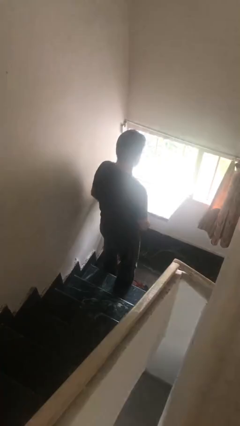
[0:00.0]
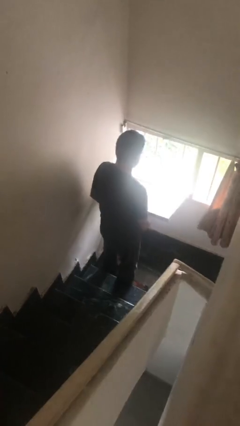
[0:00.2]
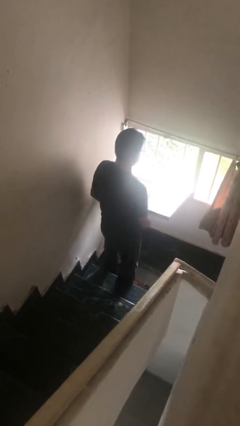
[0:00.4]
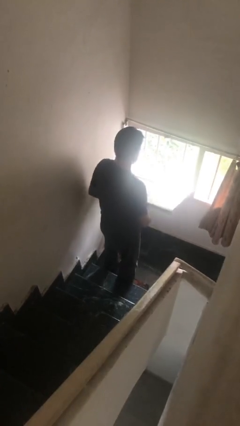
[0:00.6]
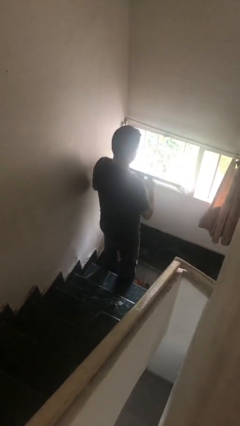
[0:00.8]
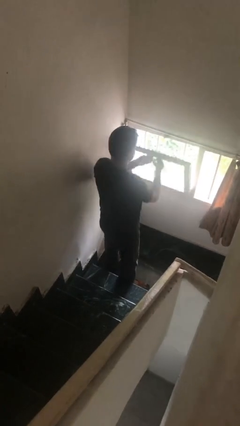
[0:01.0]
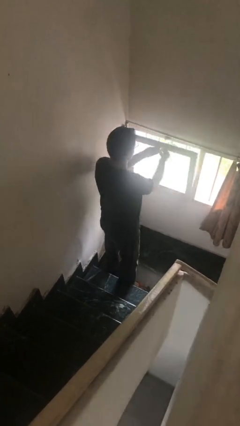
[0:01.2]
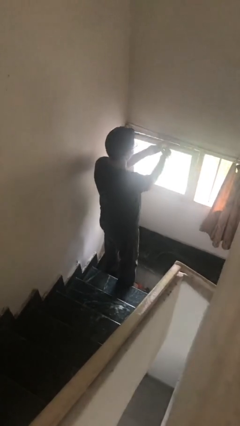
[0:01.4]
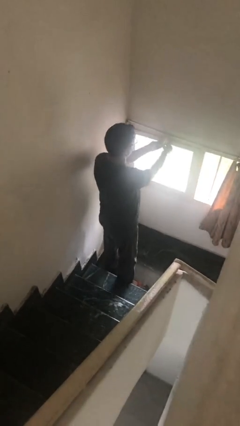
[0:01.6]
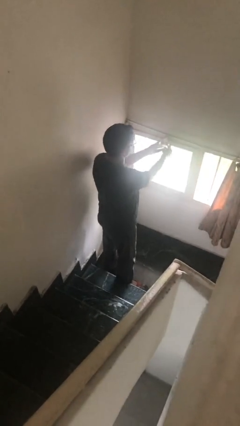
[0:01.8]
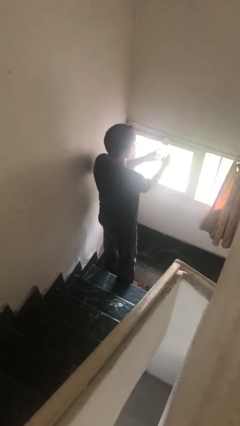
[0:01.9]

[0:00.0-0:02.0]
person closes home window

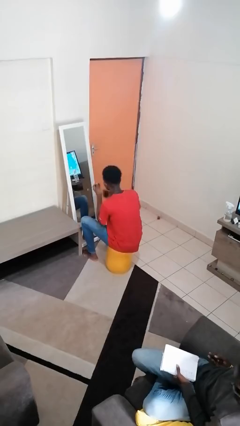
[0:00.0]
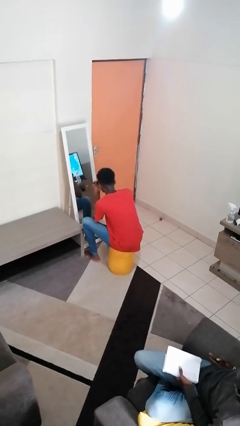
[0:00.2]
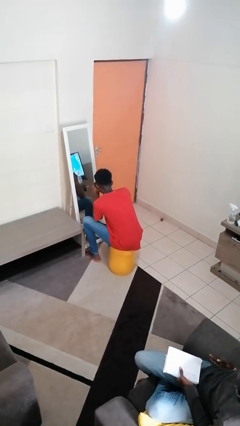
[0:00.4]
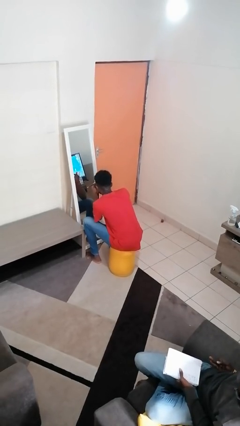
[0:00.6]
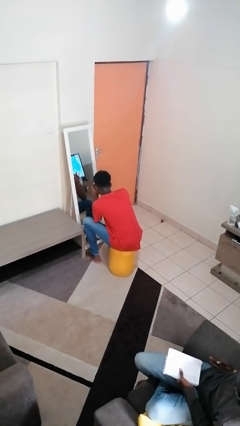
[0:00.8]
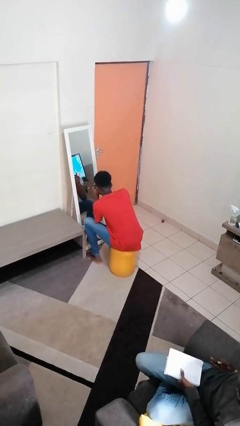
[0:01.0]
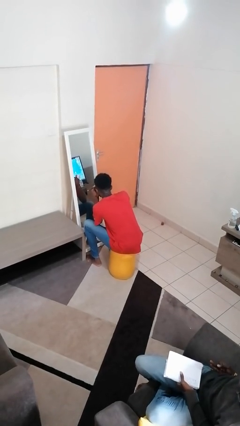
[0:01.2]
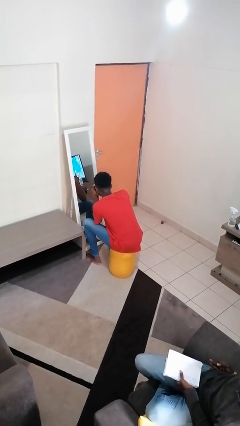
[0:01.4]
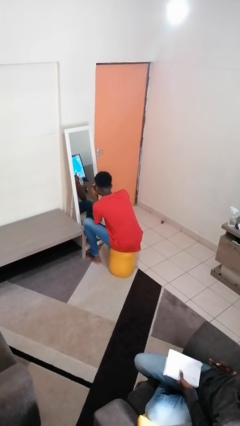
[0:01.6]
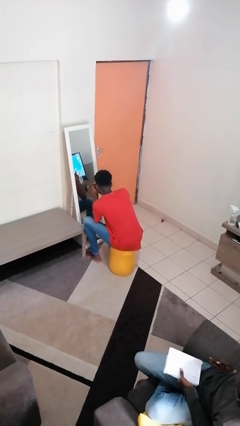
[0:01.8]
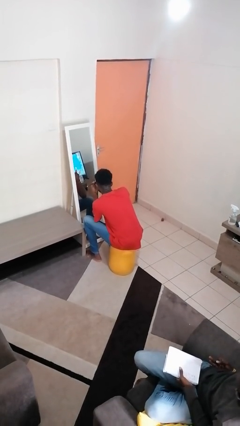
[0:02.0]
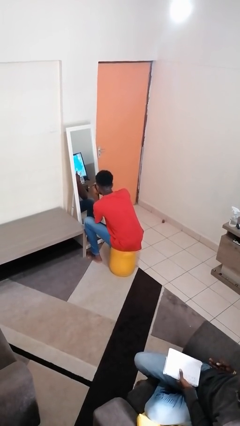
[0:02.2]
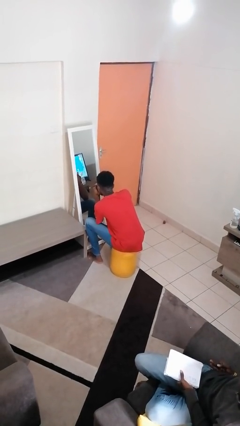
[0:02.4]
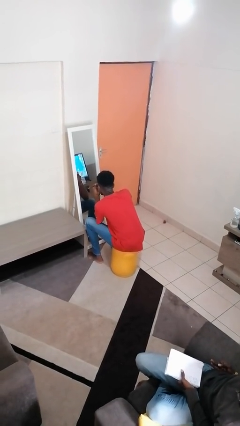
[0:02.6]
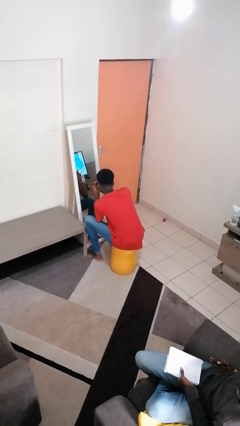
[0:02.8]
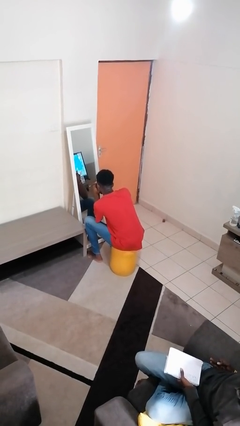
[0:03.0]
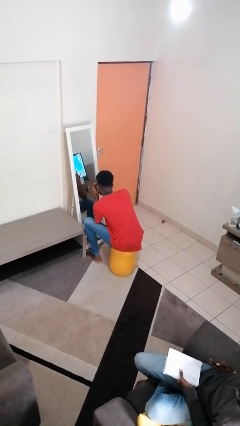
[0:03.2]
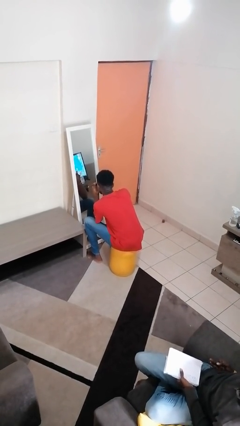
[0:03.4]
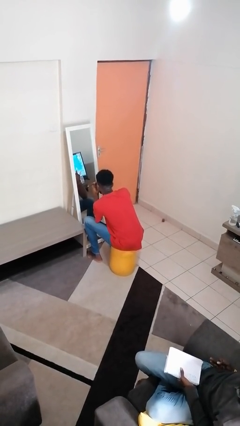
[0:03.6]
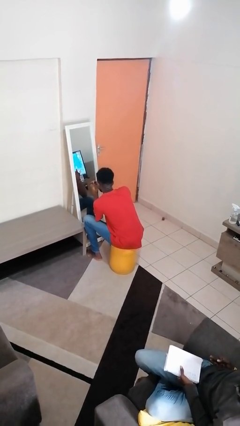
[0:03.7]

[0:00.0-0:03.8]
person applies eye makeup

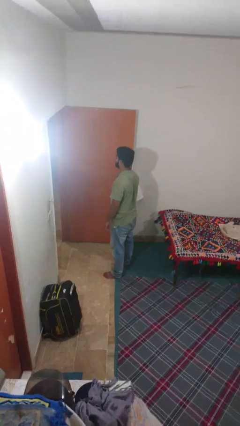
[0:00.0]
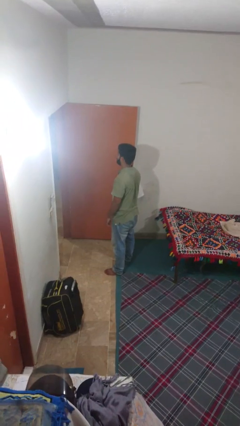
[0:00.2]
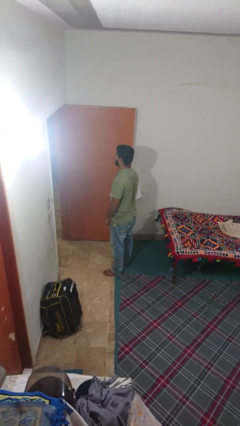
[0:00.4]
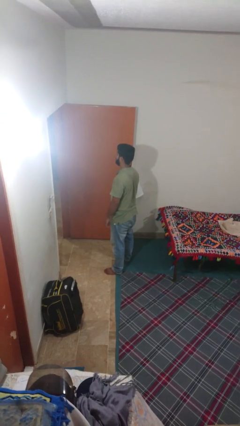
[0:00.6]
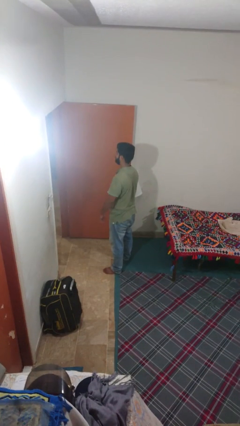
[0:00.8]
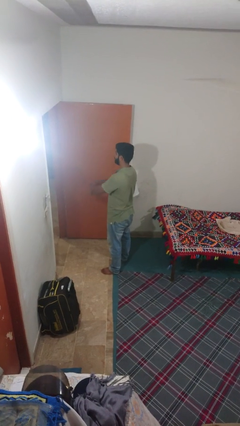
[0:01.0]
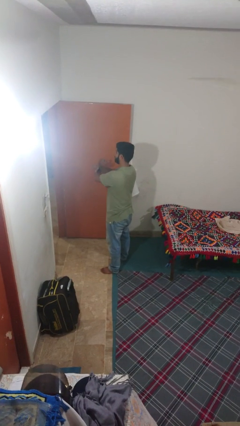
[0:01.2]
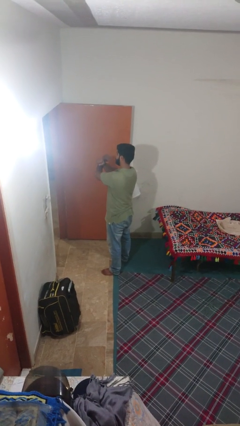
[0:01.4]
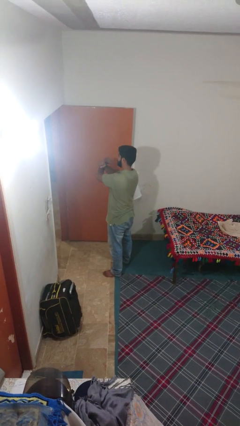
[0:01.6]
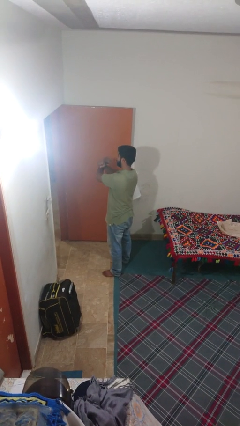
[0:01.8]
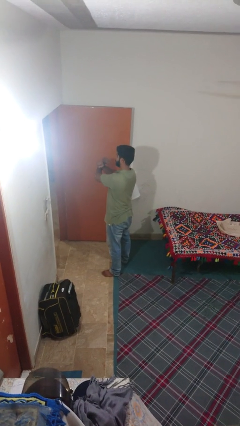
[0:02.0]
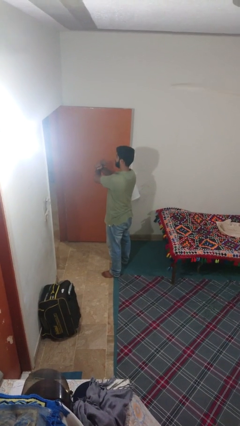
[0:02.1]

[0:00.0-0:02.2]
person crosses arms

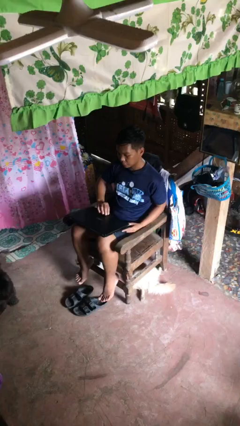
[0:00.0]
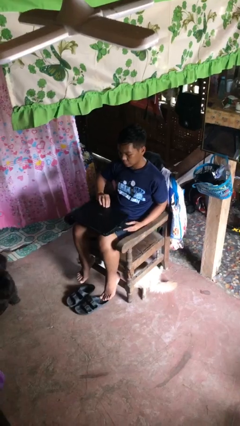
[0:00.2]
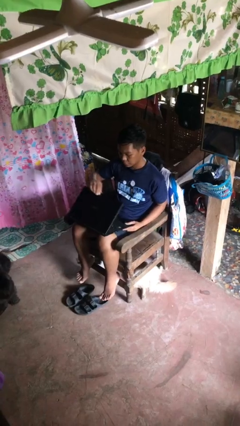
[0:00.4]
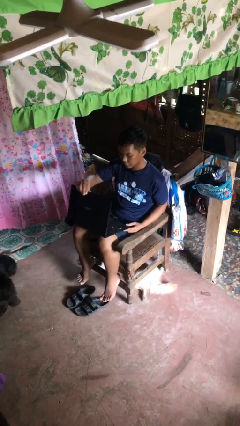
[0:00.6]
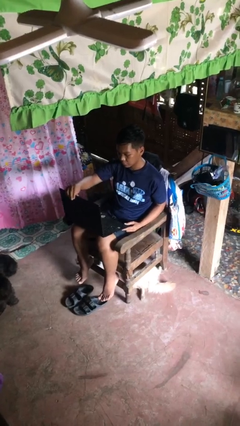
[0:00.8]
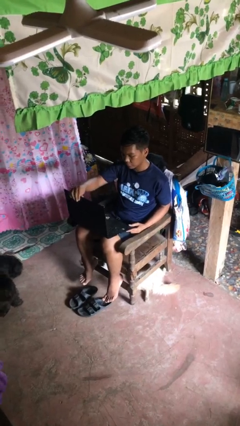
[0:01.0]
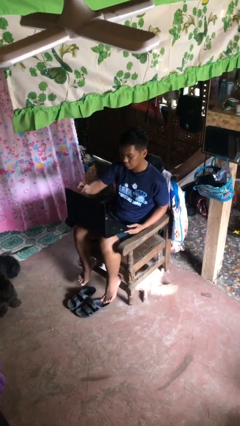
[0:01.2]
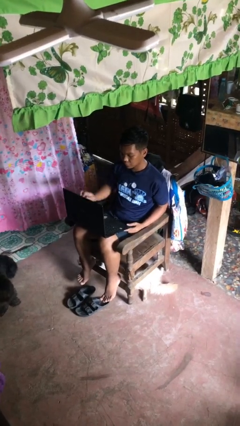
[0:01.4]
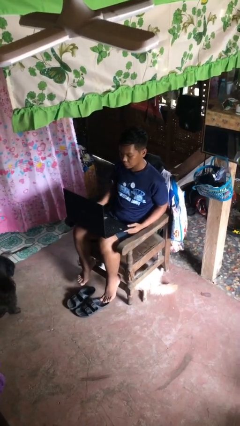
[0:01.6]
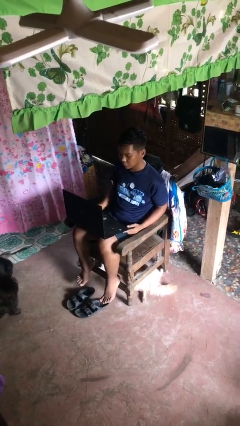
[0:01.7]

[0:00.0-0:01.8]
person opens laptop

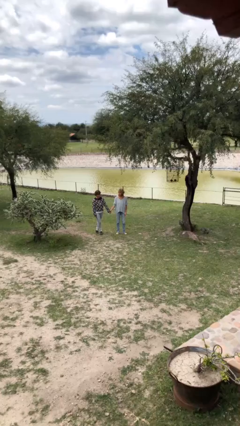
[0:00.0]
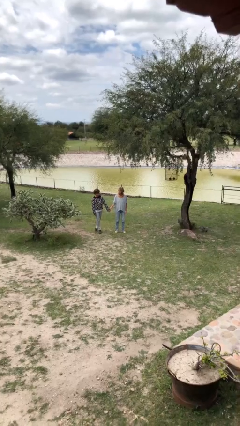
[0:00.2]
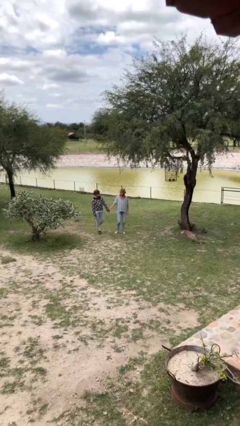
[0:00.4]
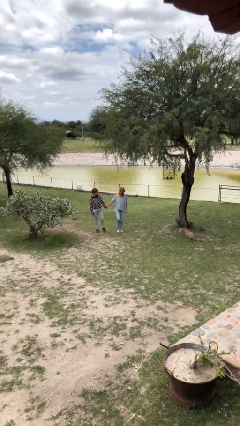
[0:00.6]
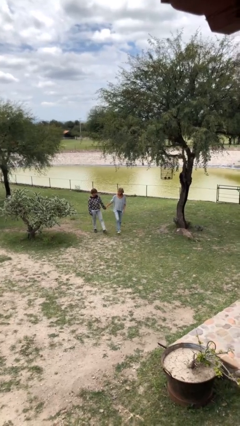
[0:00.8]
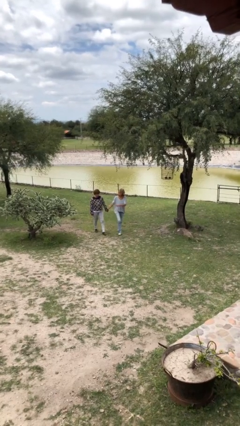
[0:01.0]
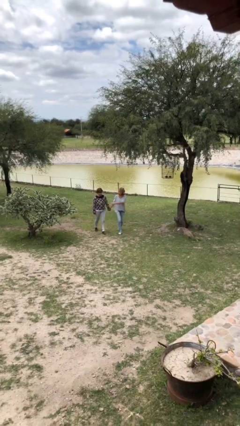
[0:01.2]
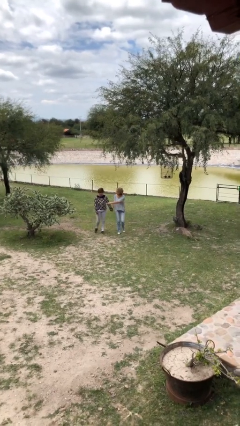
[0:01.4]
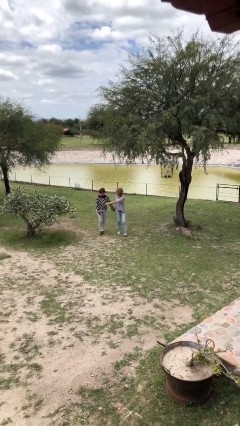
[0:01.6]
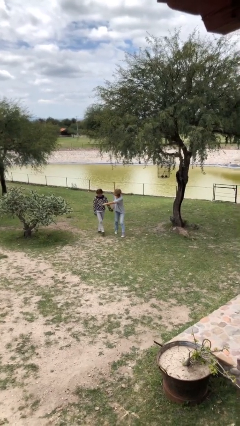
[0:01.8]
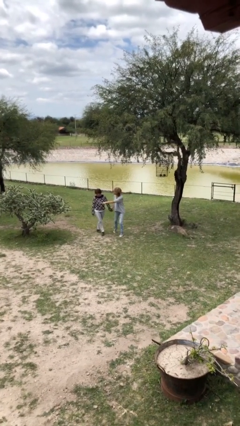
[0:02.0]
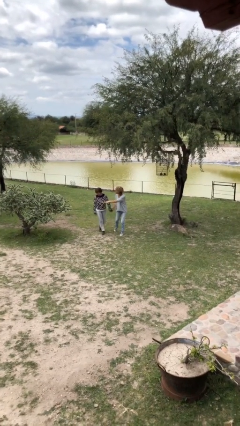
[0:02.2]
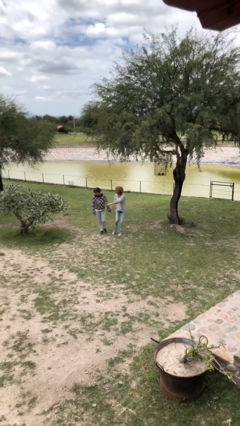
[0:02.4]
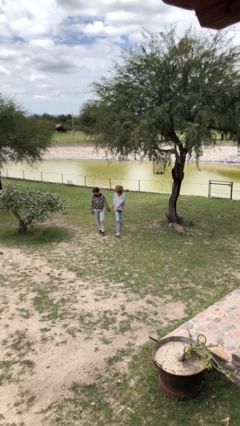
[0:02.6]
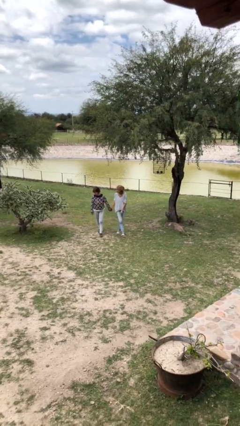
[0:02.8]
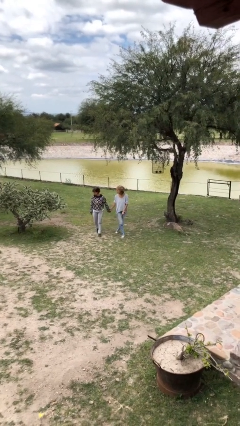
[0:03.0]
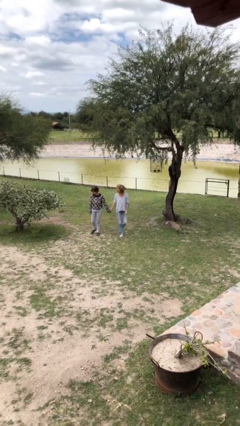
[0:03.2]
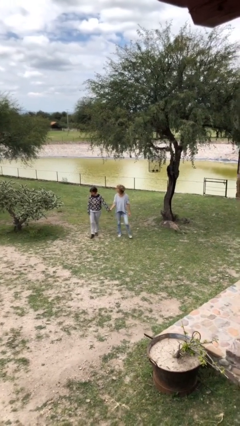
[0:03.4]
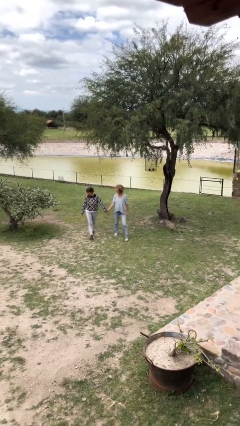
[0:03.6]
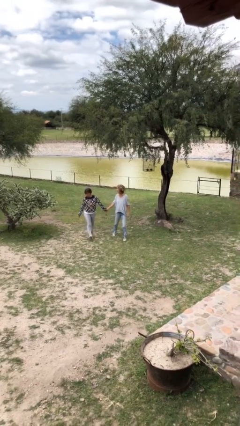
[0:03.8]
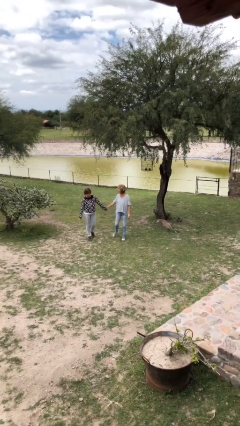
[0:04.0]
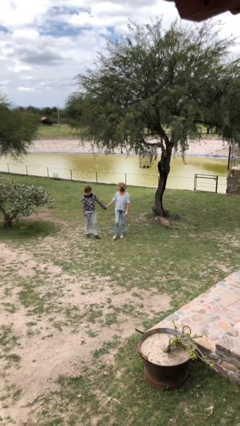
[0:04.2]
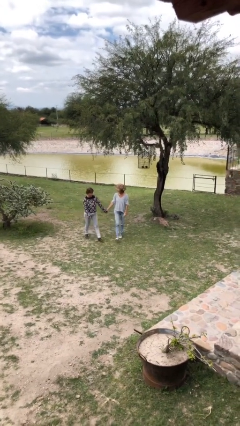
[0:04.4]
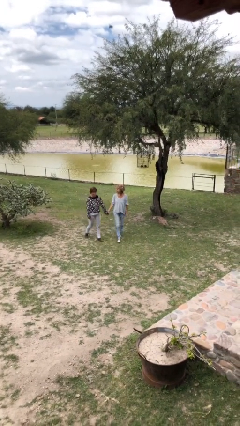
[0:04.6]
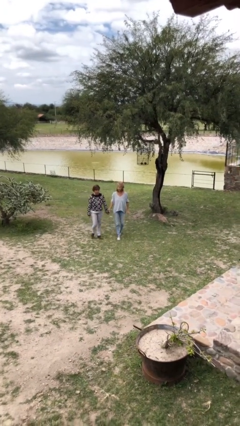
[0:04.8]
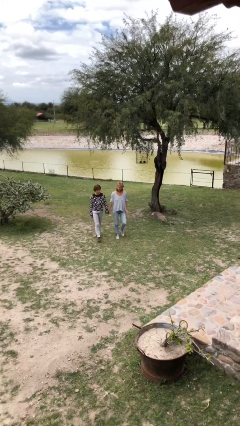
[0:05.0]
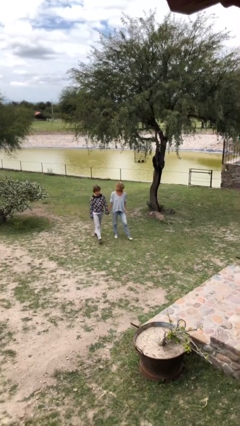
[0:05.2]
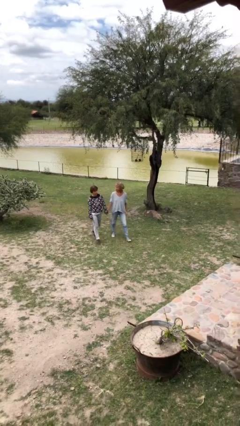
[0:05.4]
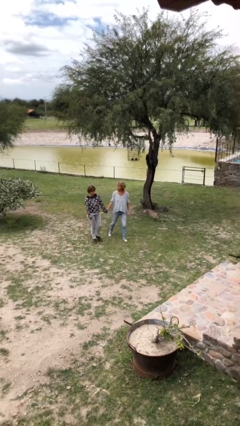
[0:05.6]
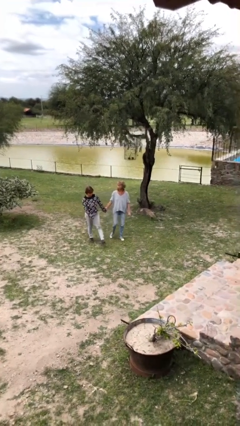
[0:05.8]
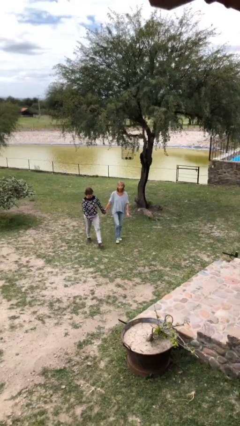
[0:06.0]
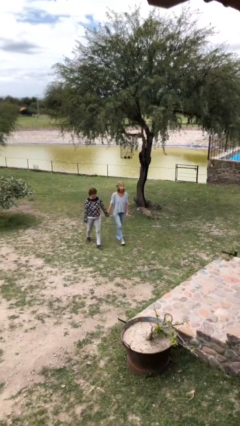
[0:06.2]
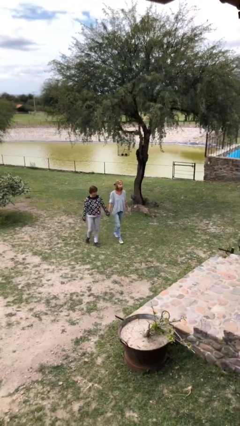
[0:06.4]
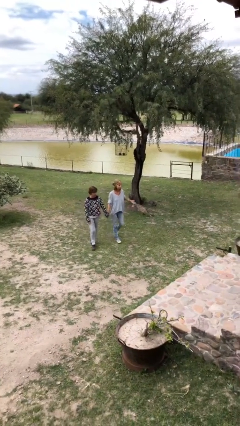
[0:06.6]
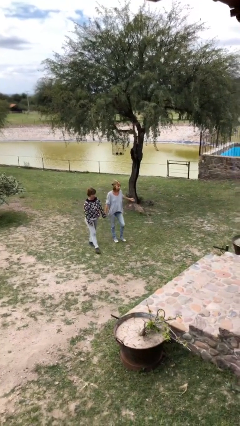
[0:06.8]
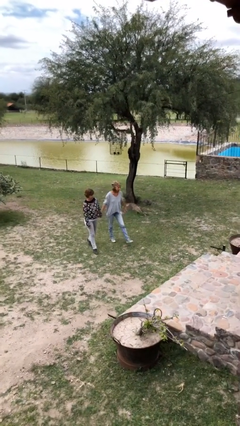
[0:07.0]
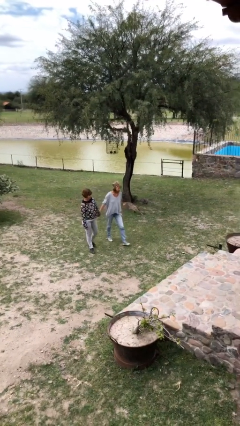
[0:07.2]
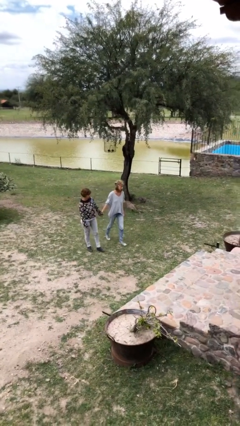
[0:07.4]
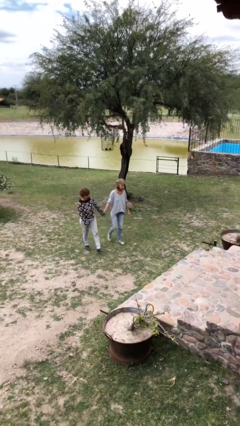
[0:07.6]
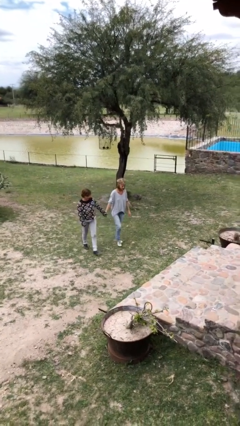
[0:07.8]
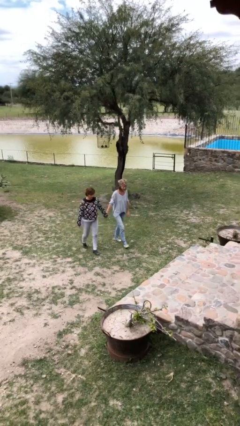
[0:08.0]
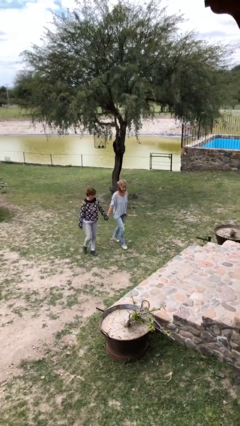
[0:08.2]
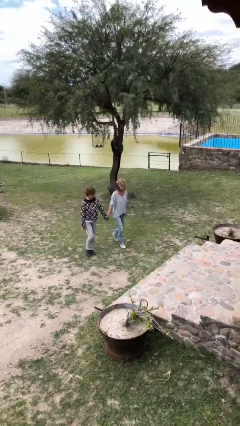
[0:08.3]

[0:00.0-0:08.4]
person holds hand
